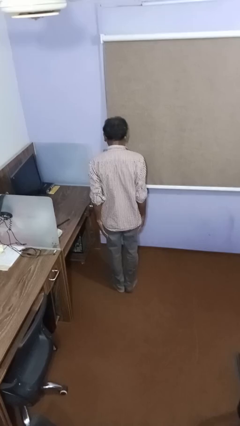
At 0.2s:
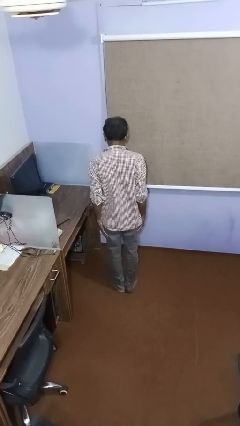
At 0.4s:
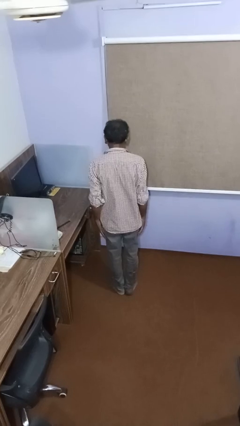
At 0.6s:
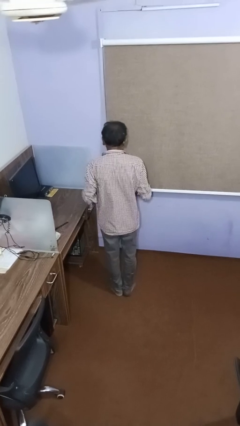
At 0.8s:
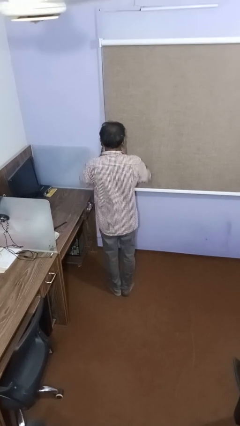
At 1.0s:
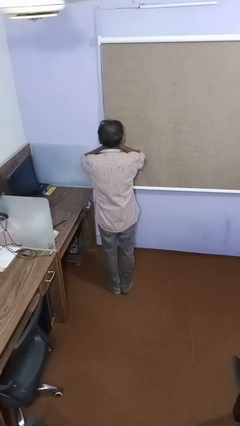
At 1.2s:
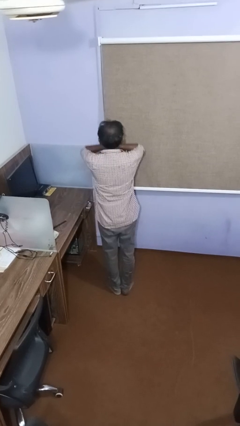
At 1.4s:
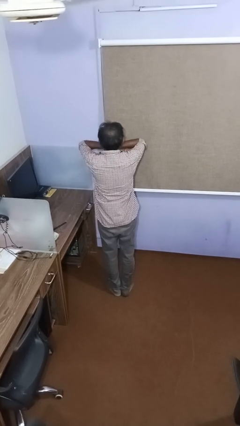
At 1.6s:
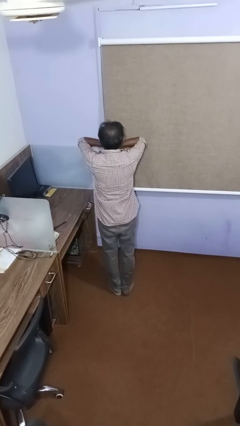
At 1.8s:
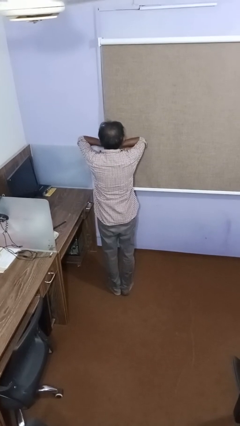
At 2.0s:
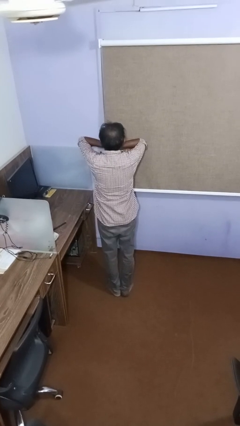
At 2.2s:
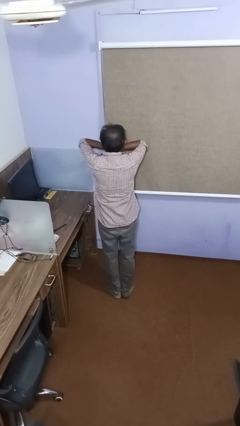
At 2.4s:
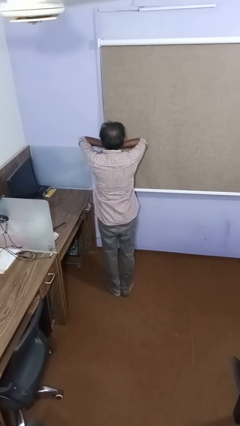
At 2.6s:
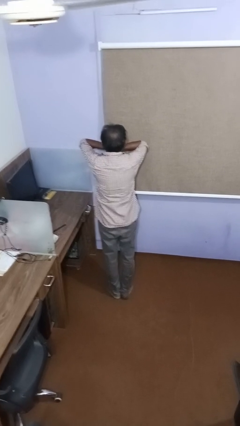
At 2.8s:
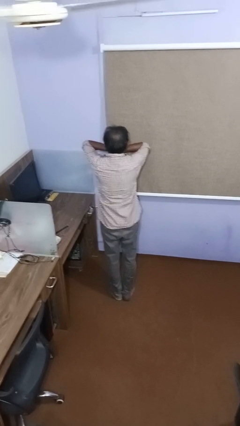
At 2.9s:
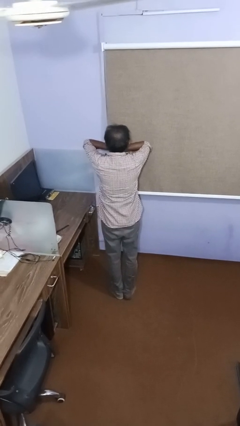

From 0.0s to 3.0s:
person covers face with hands

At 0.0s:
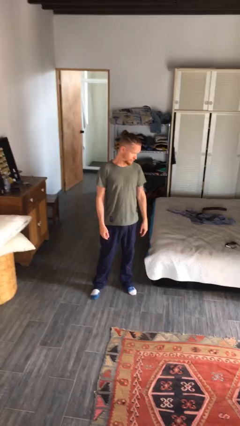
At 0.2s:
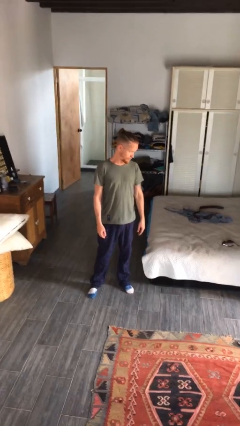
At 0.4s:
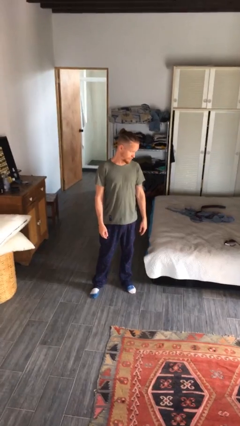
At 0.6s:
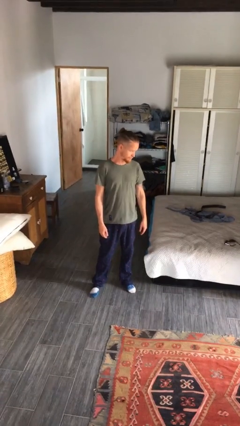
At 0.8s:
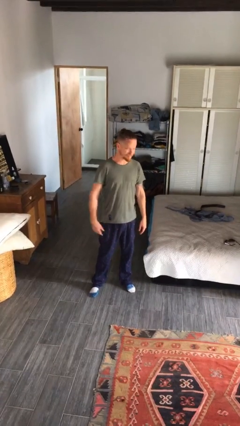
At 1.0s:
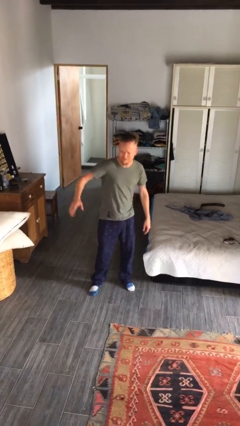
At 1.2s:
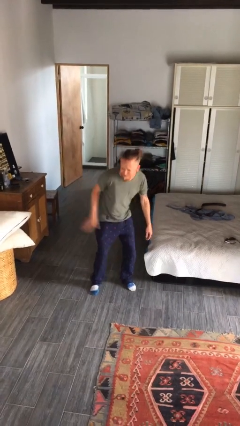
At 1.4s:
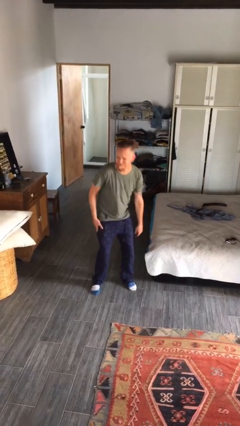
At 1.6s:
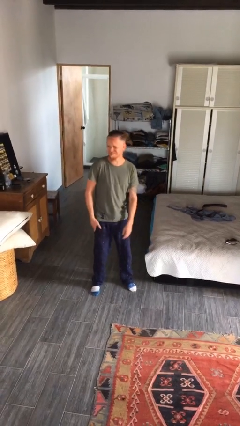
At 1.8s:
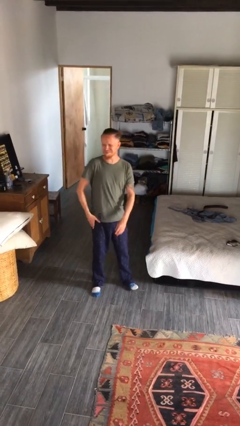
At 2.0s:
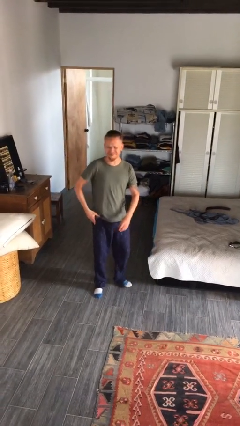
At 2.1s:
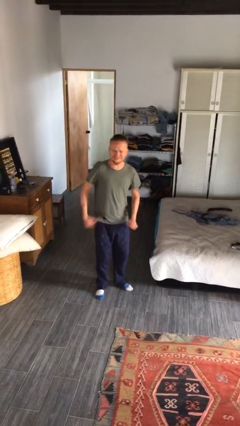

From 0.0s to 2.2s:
person slaps hands on thighs

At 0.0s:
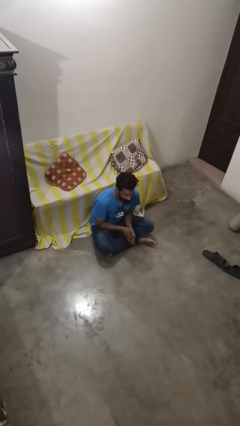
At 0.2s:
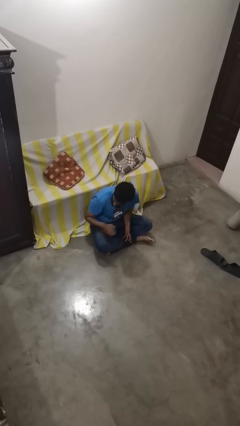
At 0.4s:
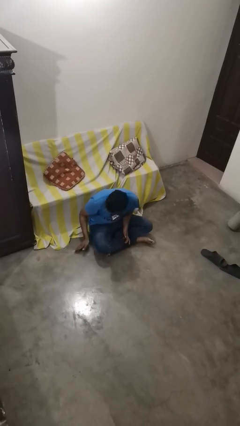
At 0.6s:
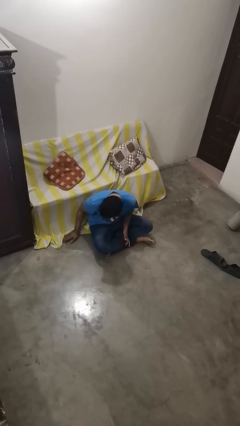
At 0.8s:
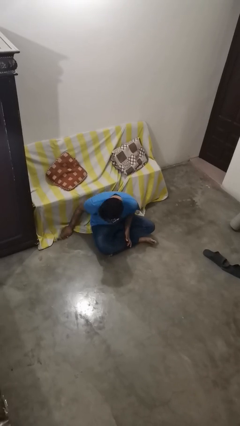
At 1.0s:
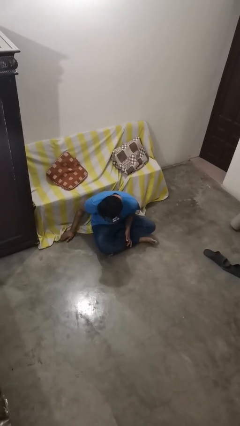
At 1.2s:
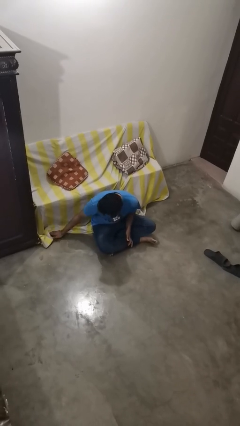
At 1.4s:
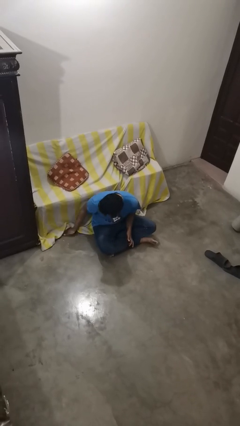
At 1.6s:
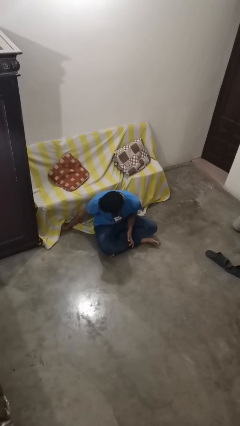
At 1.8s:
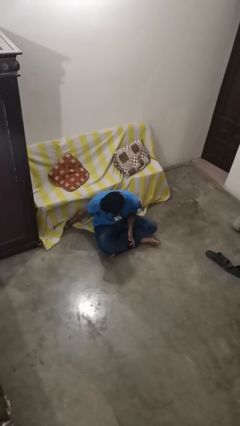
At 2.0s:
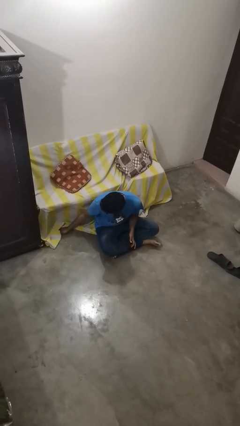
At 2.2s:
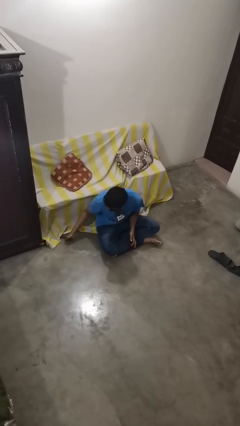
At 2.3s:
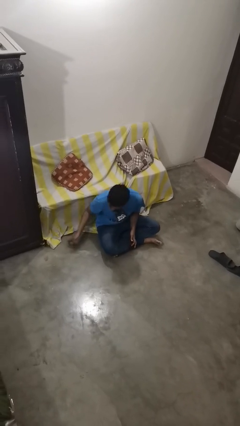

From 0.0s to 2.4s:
person searches under couch

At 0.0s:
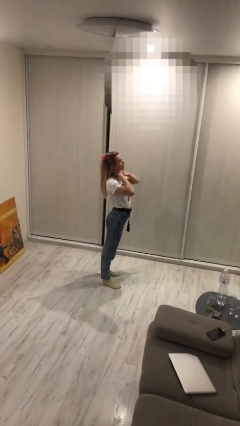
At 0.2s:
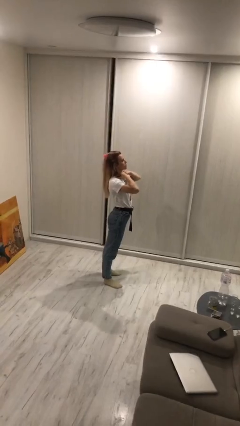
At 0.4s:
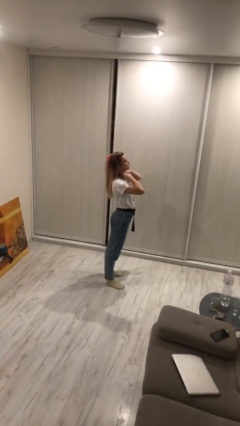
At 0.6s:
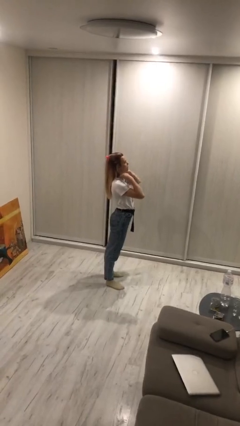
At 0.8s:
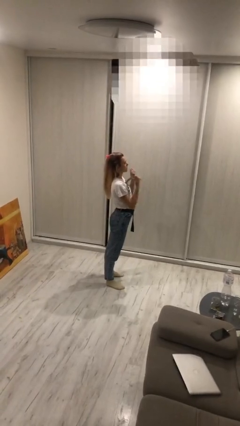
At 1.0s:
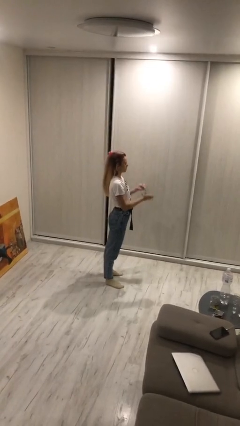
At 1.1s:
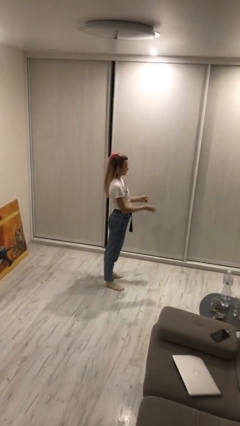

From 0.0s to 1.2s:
person takes off necklace

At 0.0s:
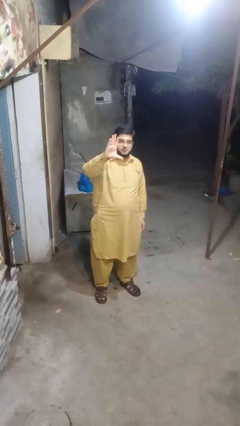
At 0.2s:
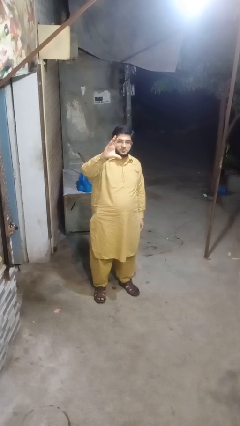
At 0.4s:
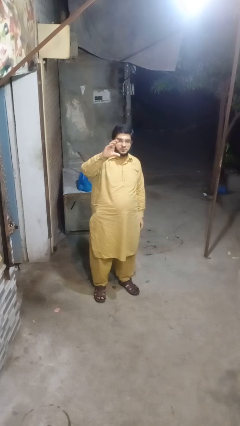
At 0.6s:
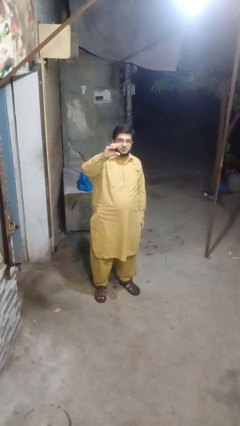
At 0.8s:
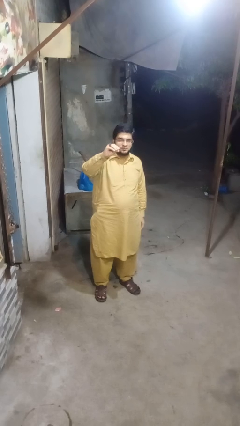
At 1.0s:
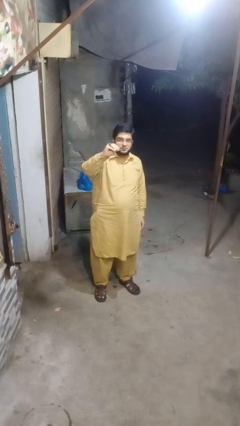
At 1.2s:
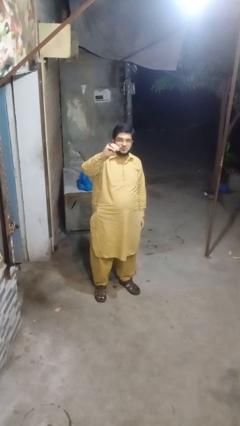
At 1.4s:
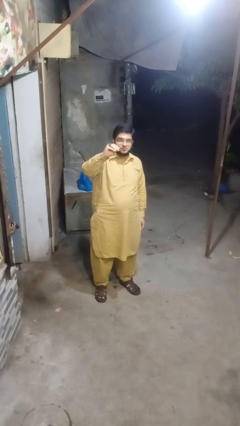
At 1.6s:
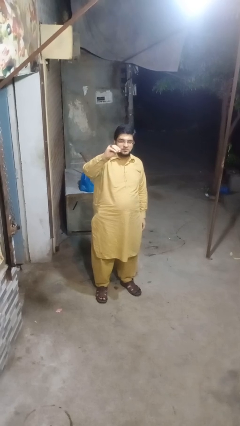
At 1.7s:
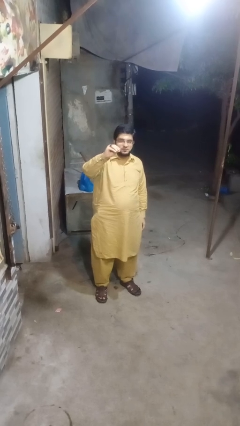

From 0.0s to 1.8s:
person gestures zoom out

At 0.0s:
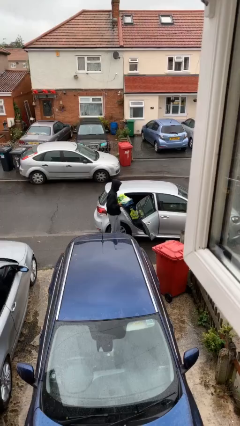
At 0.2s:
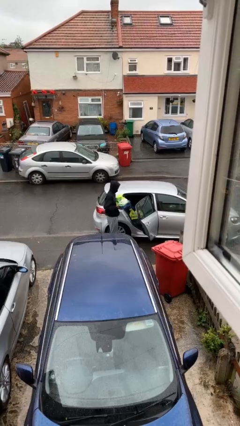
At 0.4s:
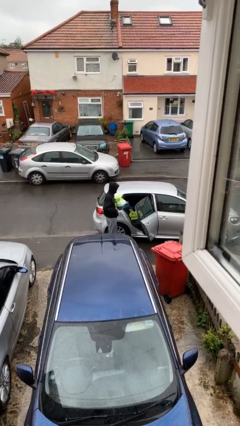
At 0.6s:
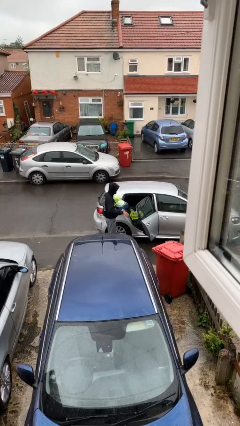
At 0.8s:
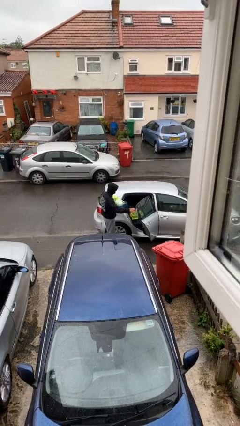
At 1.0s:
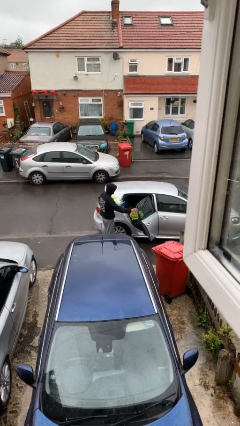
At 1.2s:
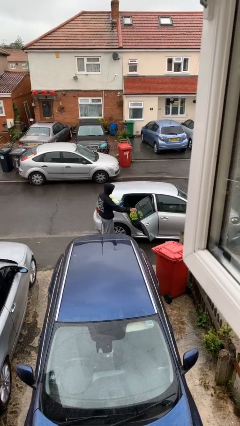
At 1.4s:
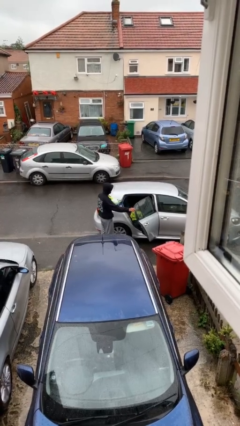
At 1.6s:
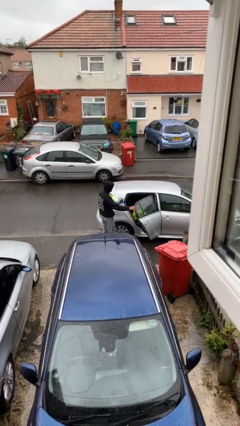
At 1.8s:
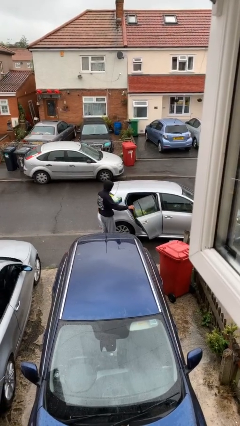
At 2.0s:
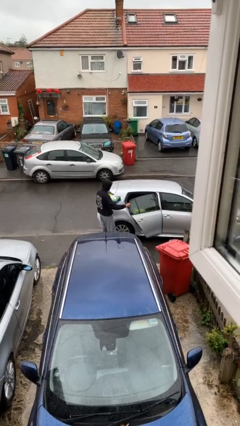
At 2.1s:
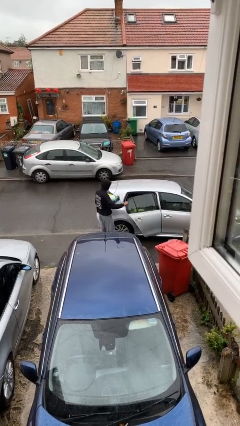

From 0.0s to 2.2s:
person unloads car

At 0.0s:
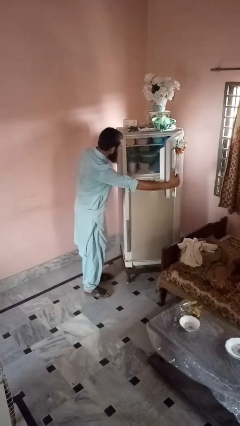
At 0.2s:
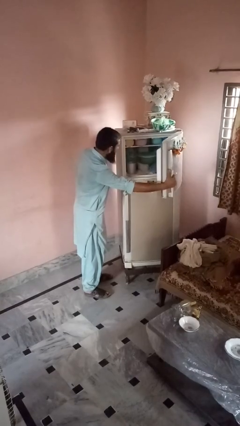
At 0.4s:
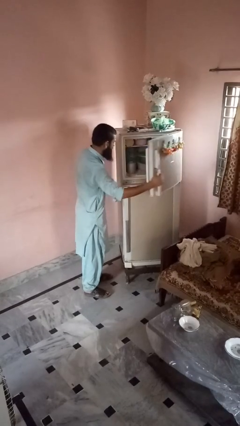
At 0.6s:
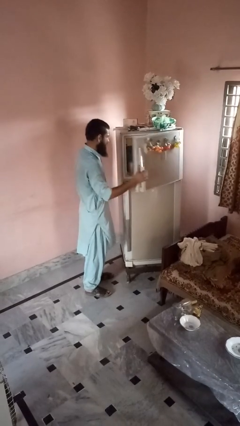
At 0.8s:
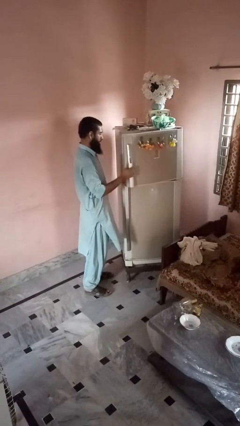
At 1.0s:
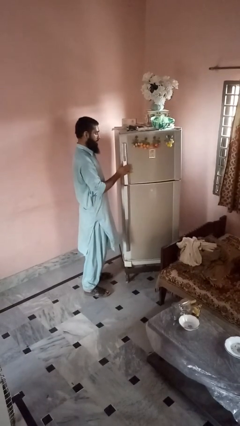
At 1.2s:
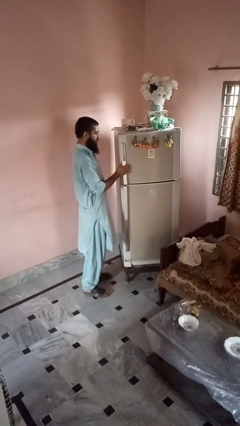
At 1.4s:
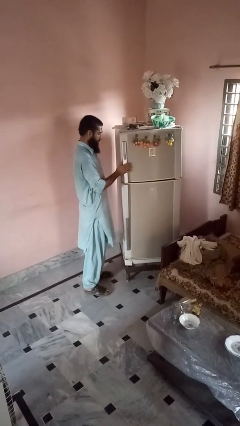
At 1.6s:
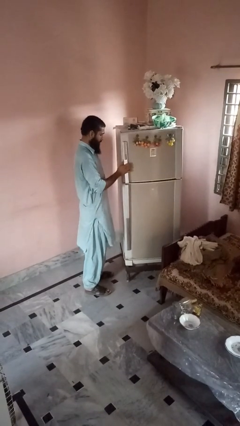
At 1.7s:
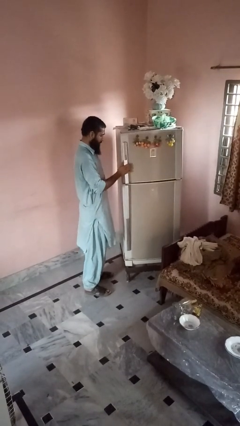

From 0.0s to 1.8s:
person closes refrigerator

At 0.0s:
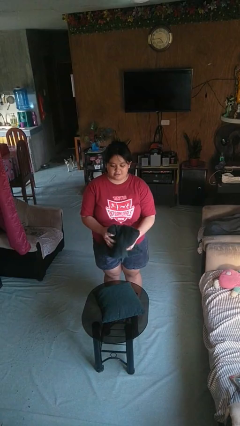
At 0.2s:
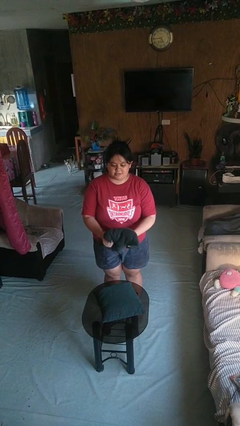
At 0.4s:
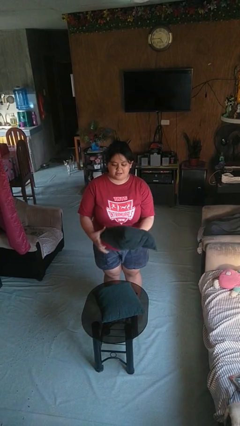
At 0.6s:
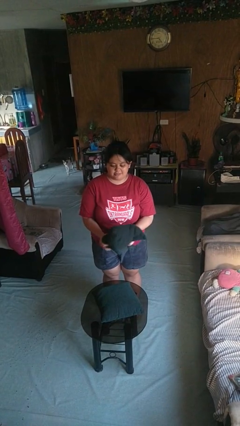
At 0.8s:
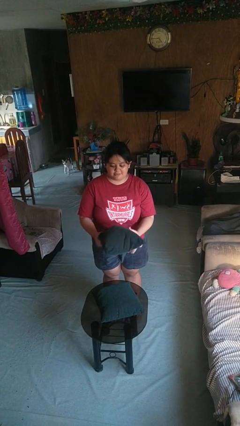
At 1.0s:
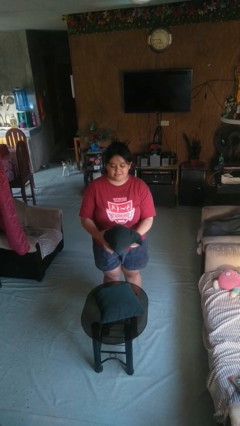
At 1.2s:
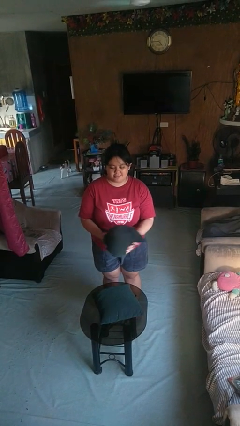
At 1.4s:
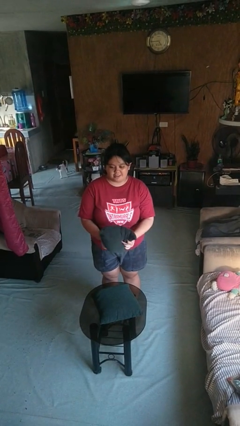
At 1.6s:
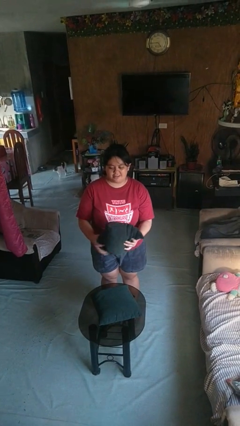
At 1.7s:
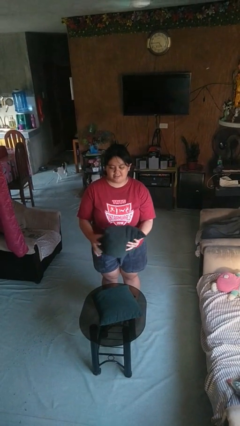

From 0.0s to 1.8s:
person squeezes object

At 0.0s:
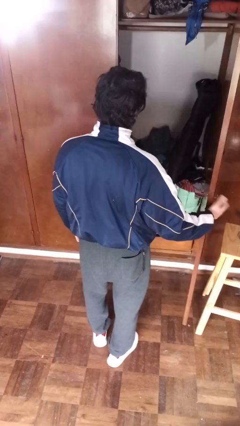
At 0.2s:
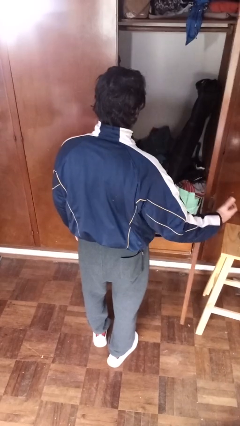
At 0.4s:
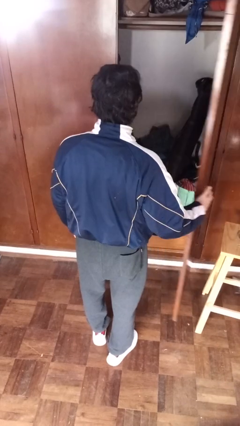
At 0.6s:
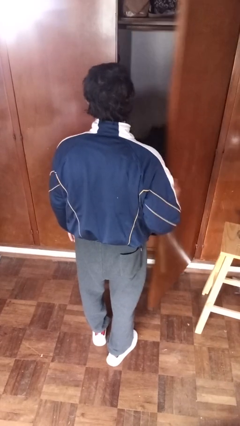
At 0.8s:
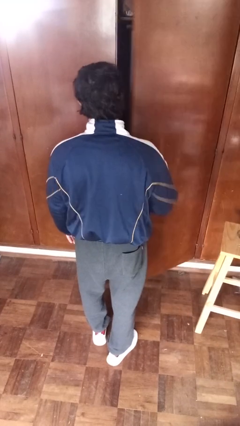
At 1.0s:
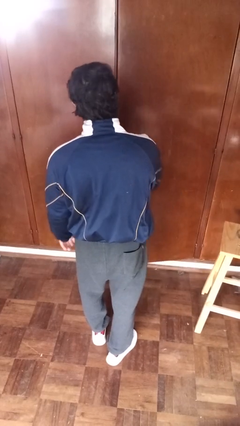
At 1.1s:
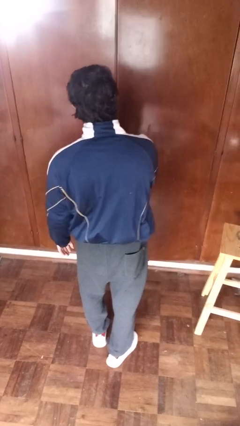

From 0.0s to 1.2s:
person closes closet door
